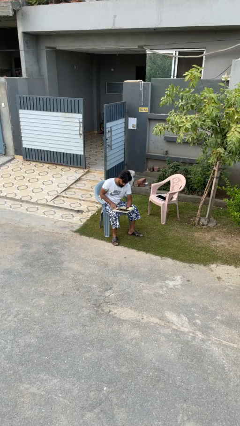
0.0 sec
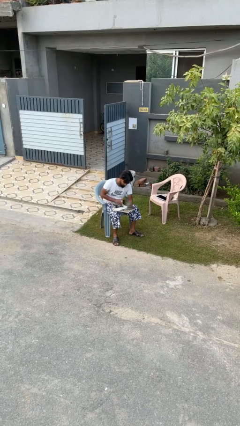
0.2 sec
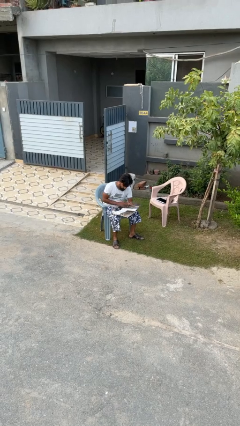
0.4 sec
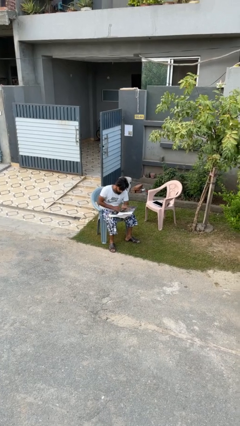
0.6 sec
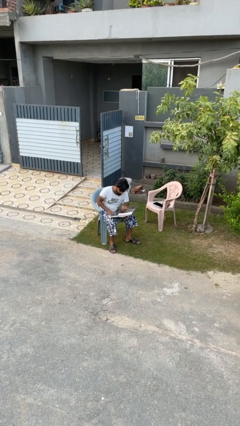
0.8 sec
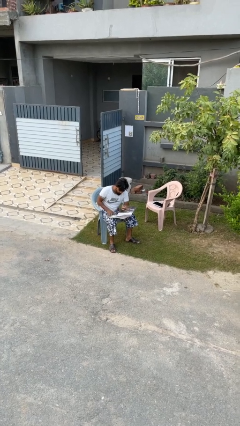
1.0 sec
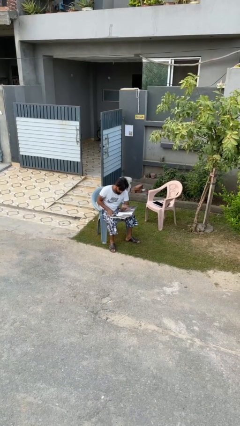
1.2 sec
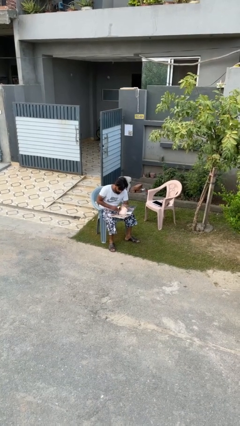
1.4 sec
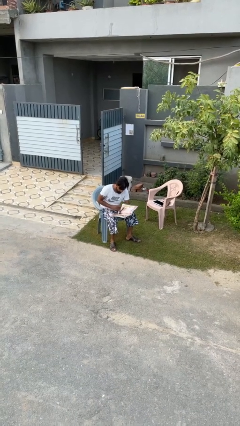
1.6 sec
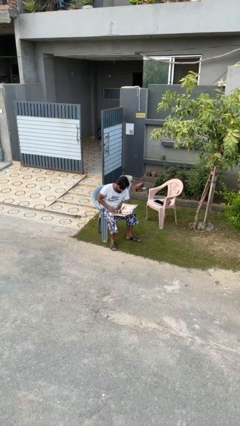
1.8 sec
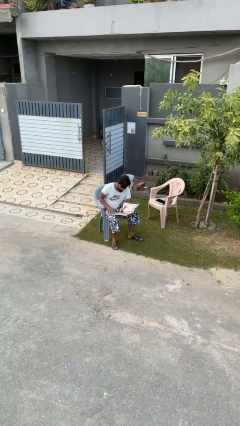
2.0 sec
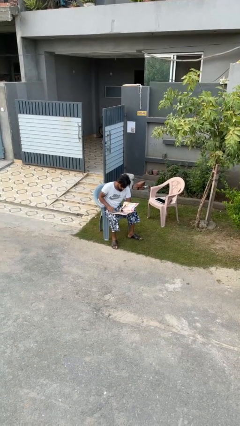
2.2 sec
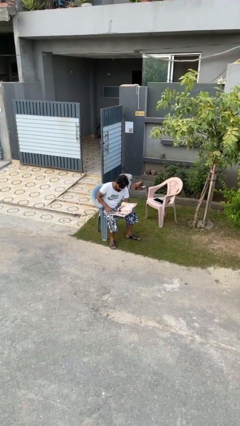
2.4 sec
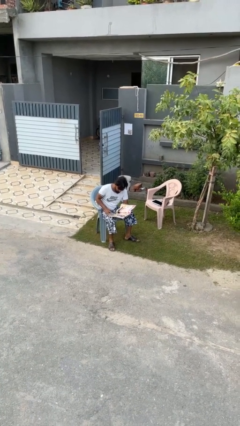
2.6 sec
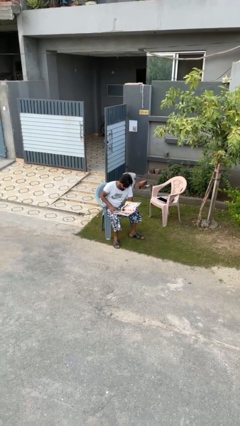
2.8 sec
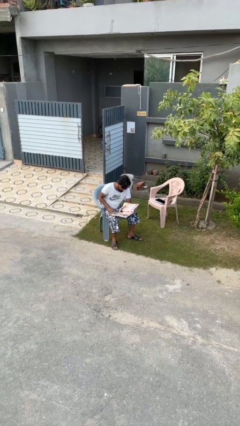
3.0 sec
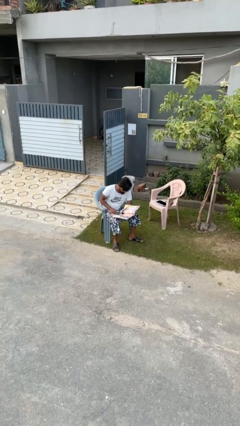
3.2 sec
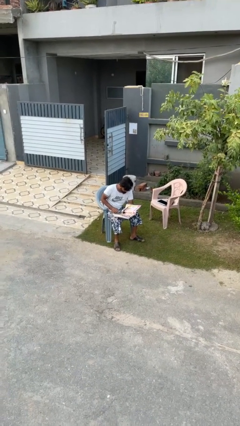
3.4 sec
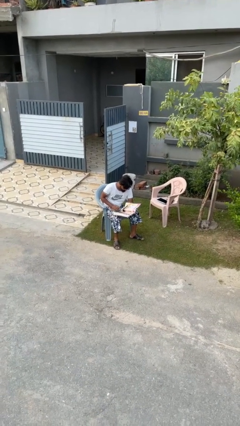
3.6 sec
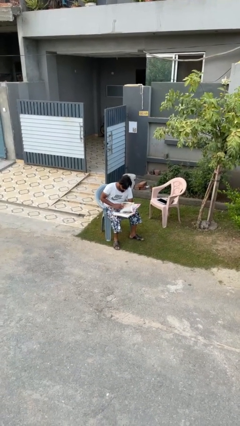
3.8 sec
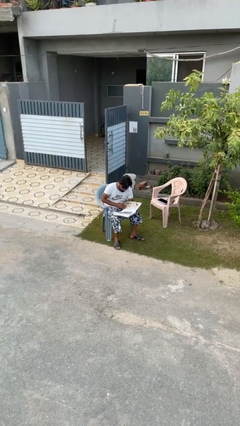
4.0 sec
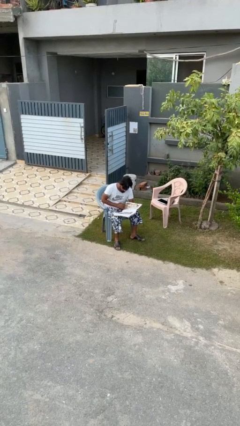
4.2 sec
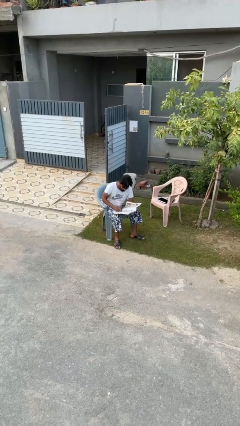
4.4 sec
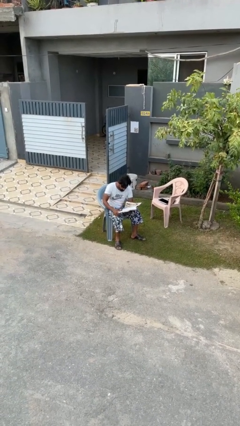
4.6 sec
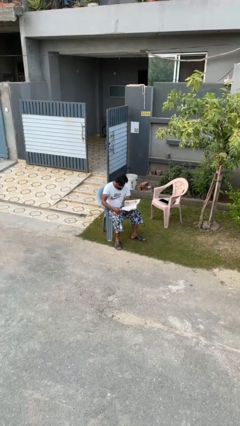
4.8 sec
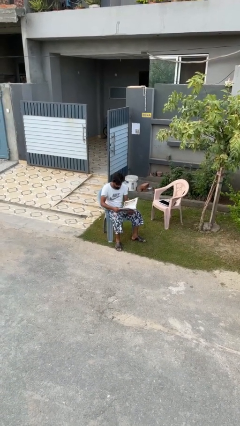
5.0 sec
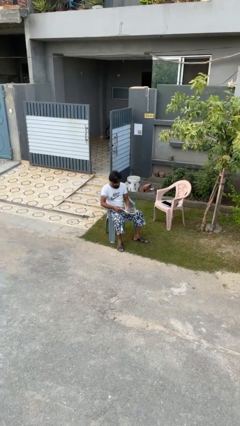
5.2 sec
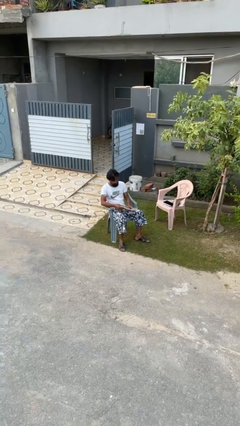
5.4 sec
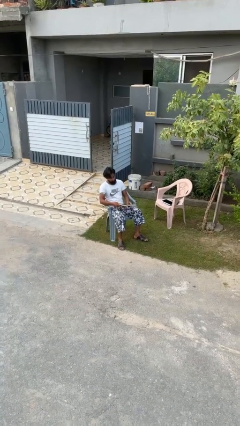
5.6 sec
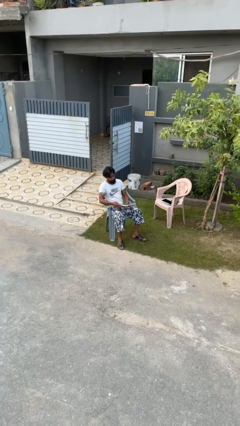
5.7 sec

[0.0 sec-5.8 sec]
person reads magazine

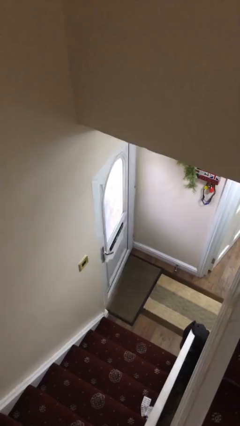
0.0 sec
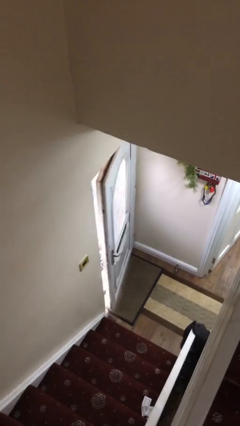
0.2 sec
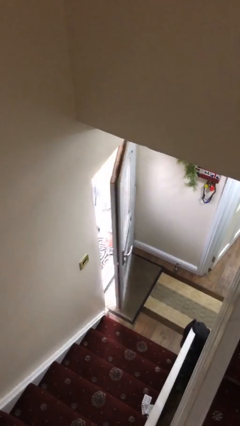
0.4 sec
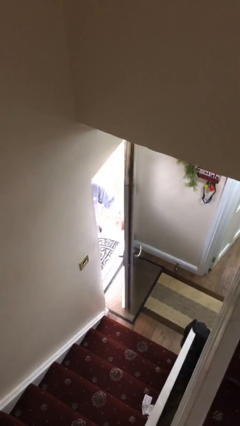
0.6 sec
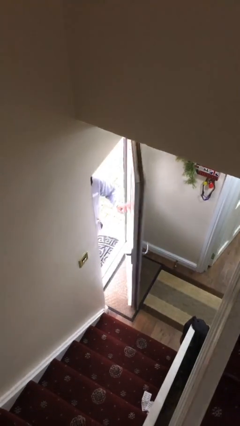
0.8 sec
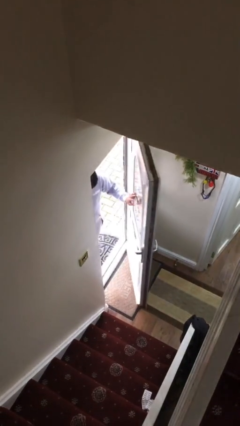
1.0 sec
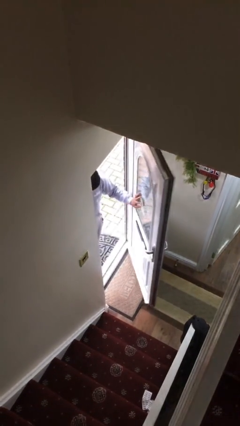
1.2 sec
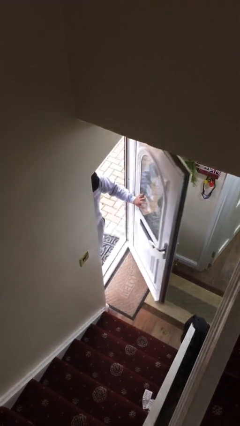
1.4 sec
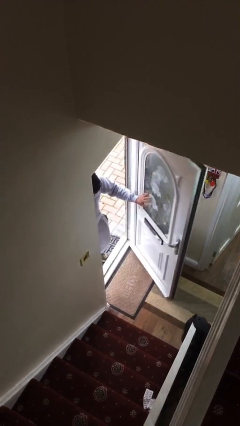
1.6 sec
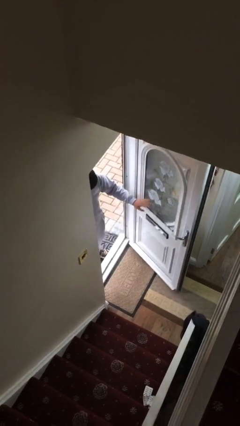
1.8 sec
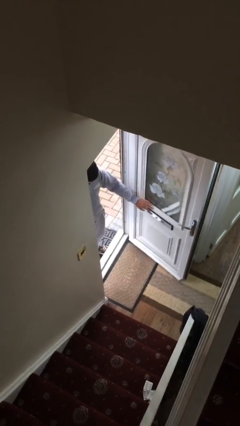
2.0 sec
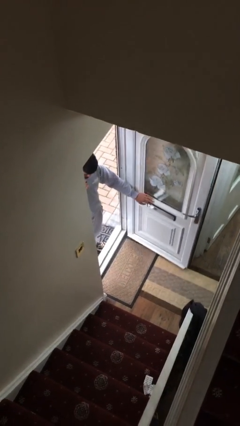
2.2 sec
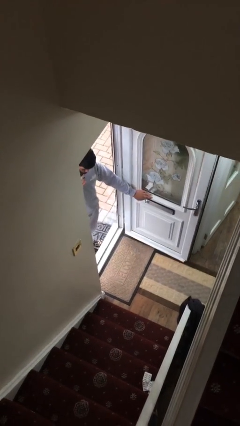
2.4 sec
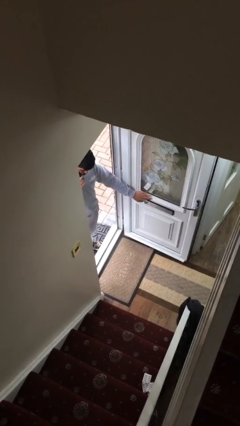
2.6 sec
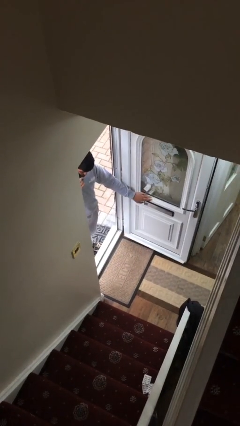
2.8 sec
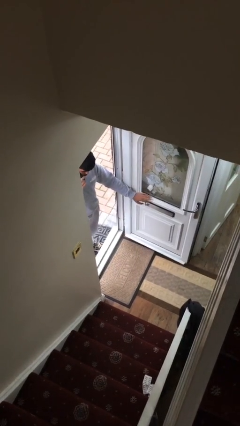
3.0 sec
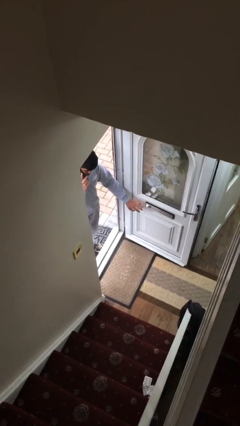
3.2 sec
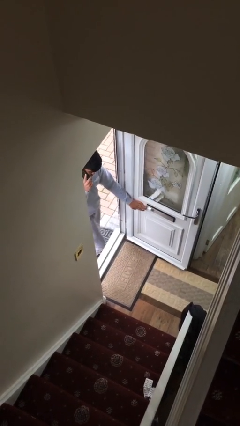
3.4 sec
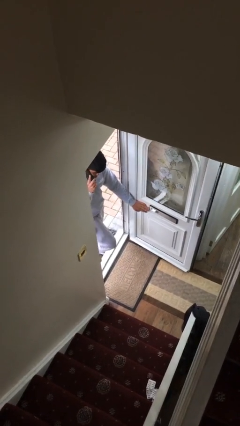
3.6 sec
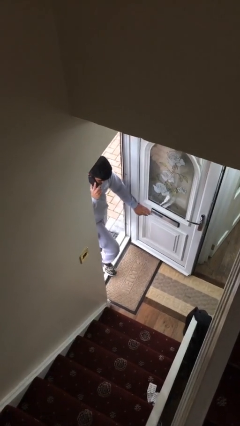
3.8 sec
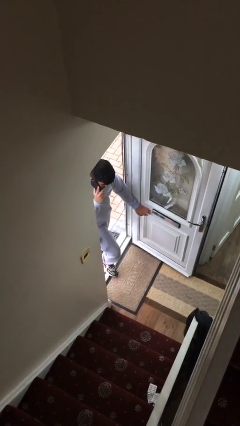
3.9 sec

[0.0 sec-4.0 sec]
person opens facility door

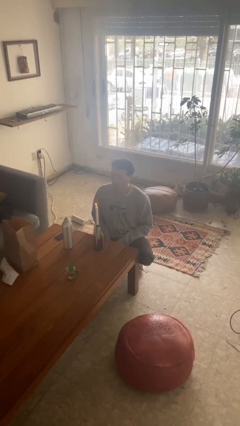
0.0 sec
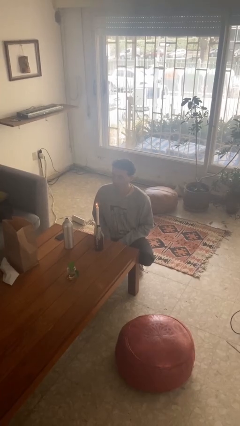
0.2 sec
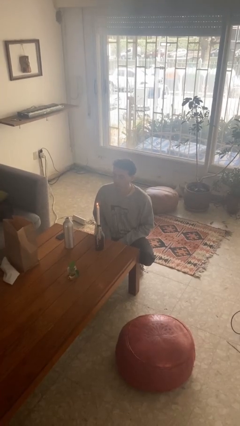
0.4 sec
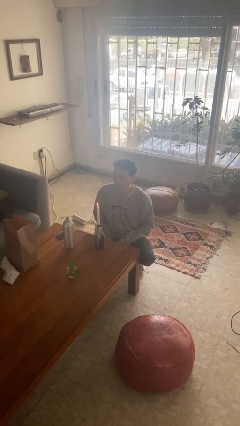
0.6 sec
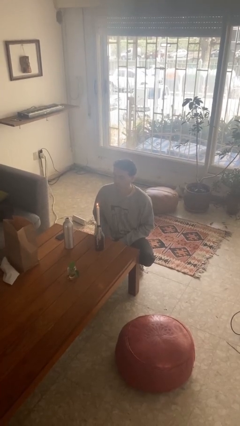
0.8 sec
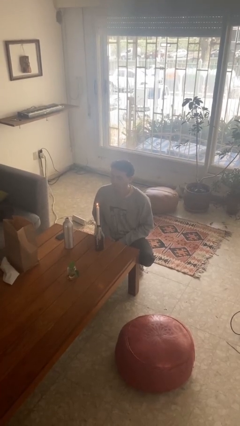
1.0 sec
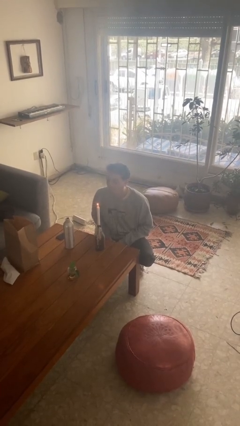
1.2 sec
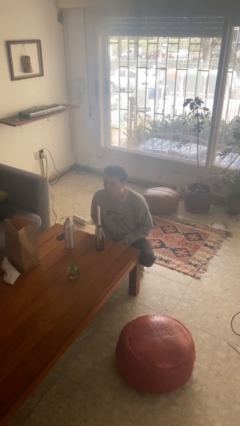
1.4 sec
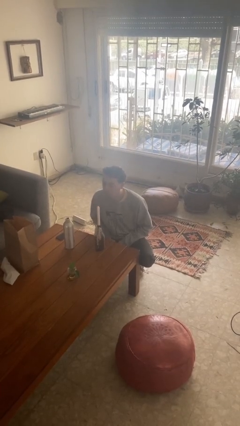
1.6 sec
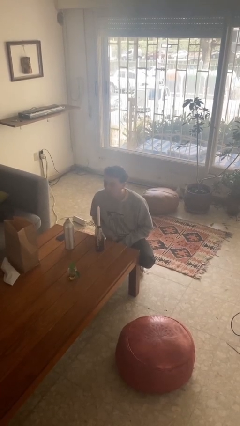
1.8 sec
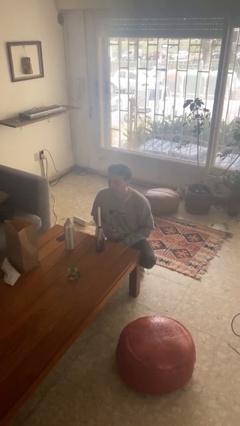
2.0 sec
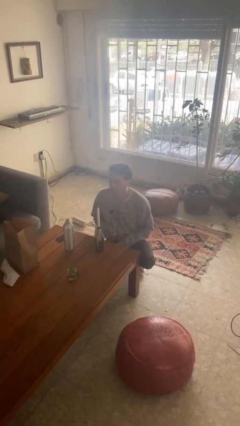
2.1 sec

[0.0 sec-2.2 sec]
person extinguishes candle

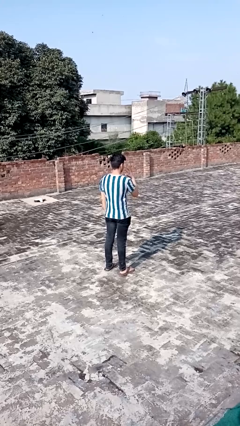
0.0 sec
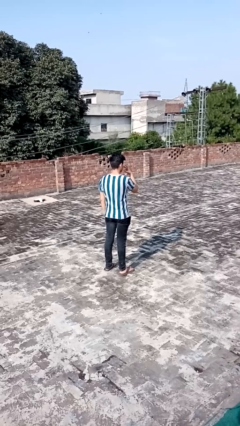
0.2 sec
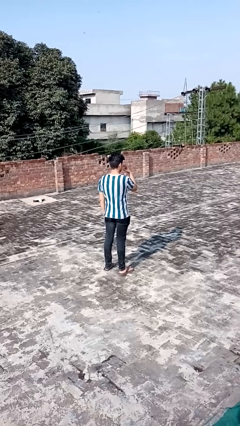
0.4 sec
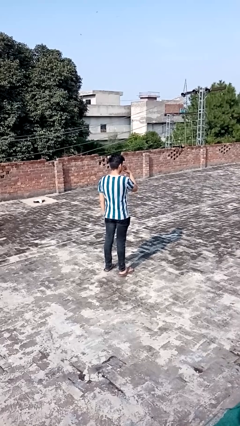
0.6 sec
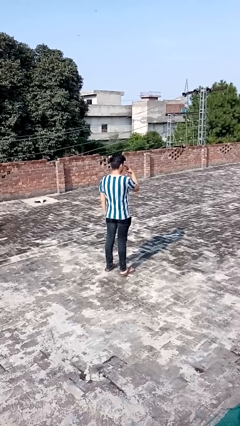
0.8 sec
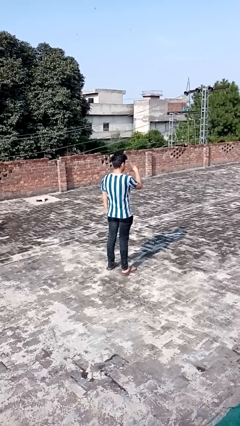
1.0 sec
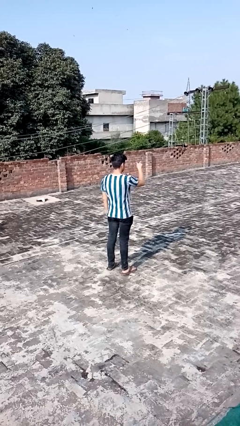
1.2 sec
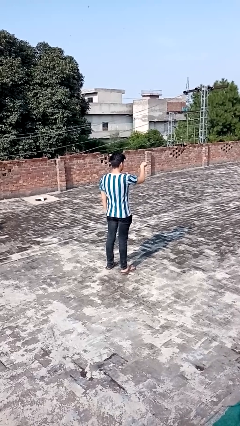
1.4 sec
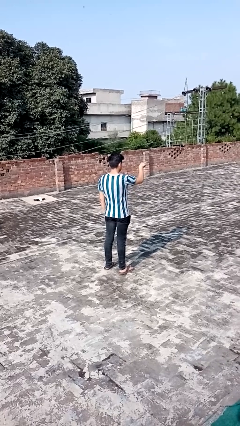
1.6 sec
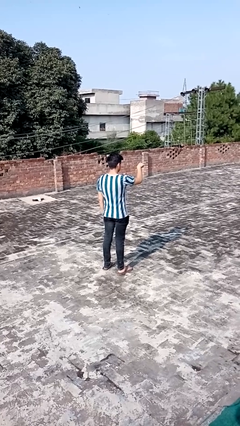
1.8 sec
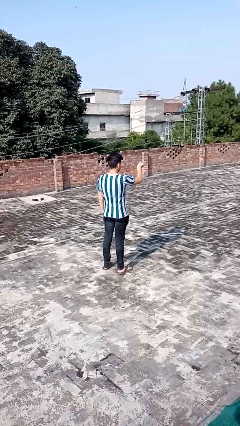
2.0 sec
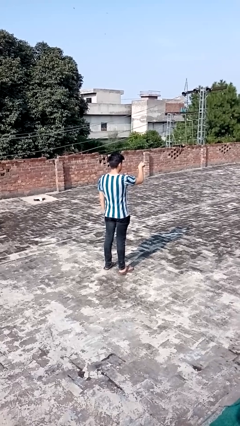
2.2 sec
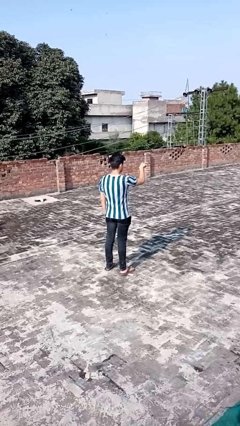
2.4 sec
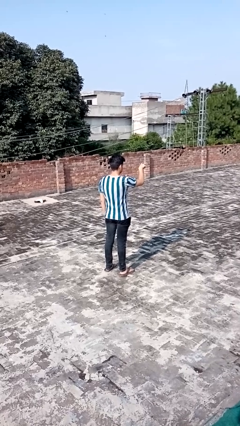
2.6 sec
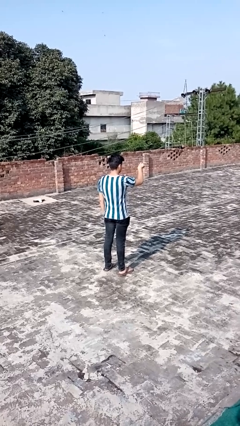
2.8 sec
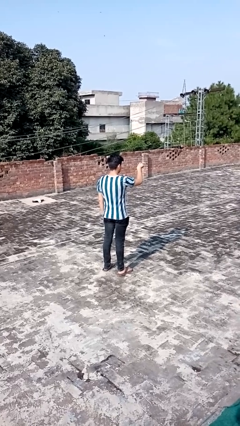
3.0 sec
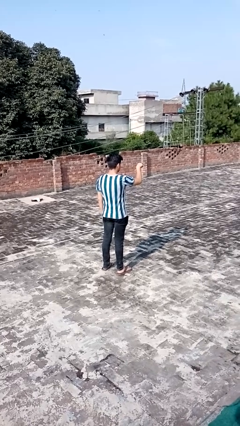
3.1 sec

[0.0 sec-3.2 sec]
person gestures watch closely

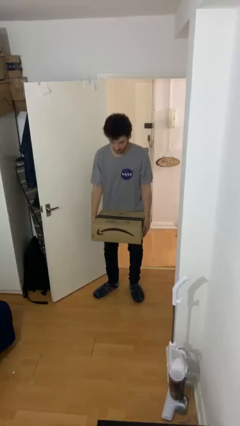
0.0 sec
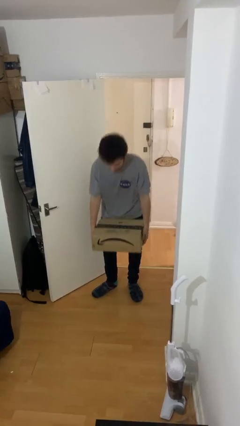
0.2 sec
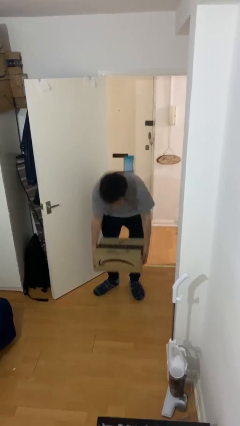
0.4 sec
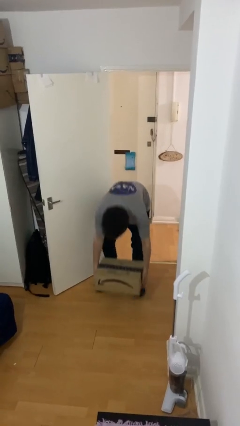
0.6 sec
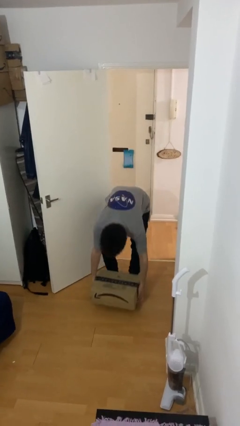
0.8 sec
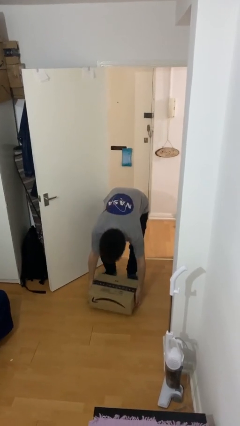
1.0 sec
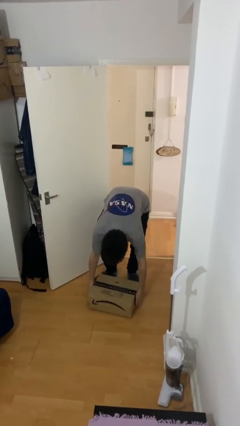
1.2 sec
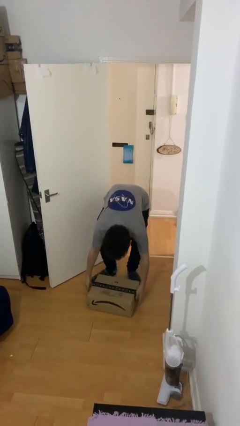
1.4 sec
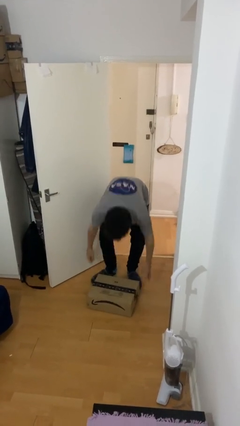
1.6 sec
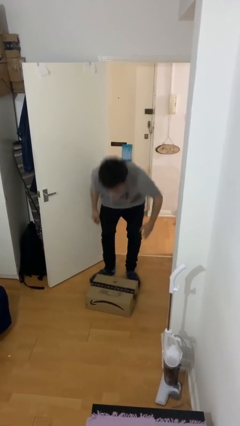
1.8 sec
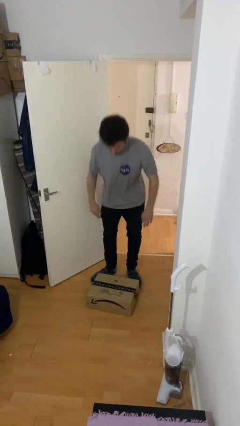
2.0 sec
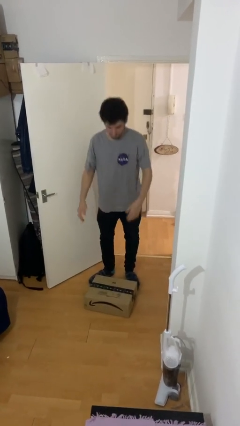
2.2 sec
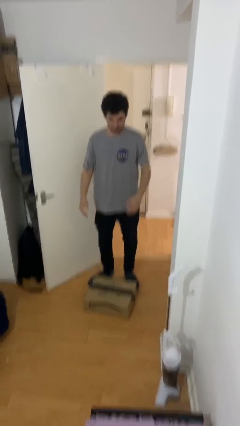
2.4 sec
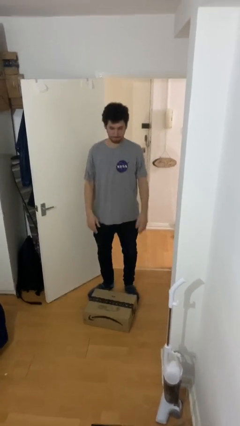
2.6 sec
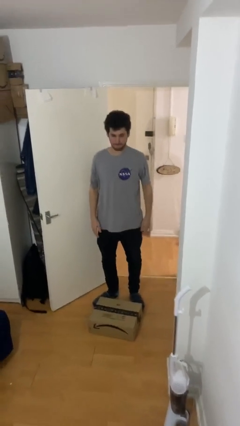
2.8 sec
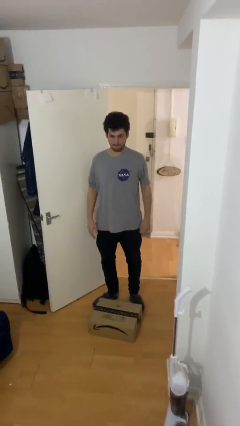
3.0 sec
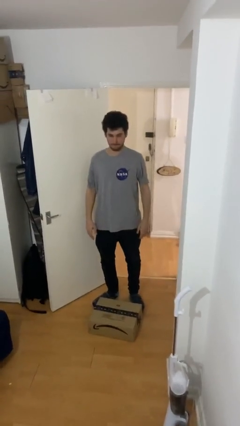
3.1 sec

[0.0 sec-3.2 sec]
person puts down object on floor
